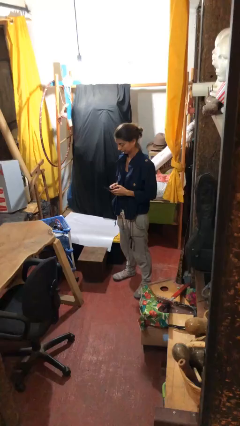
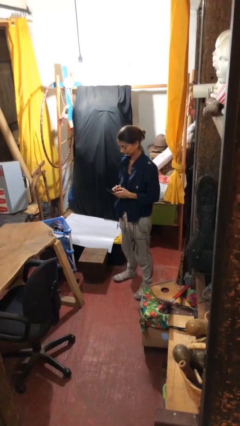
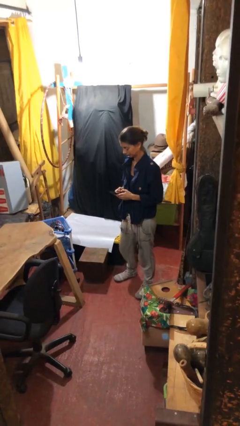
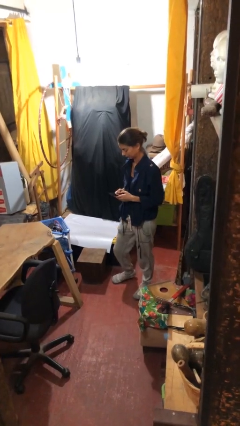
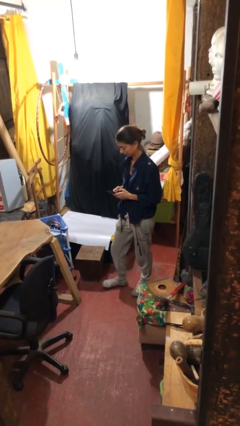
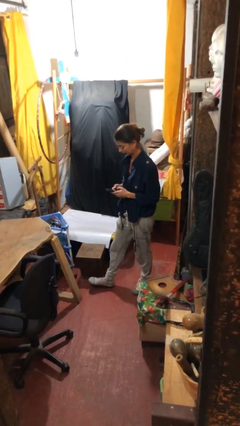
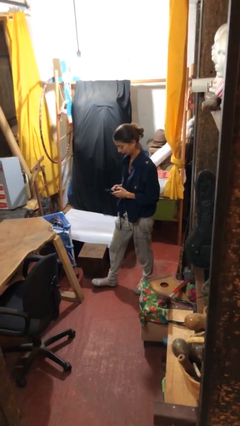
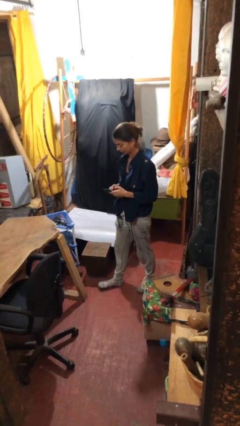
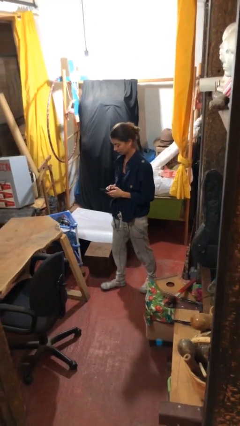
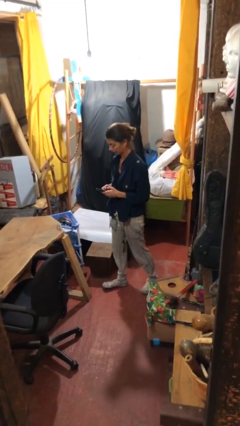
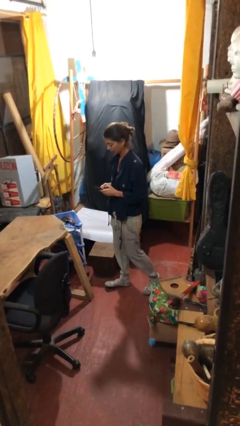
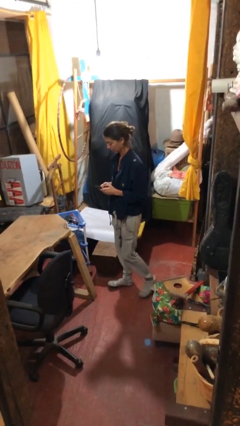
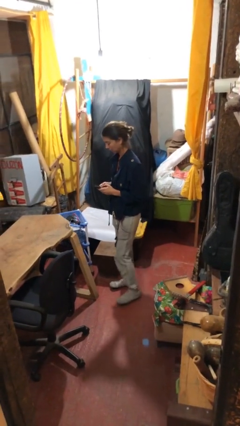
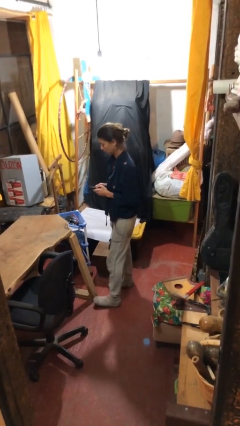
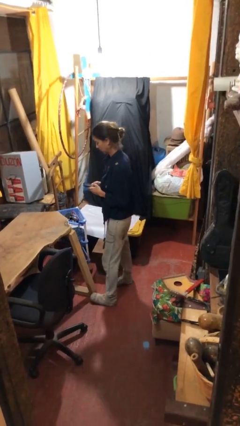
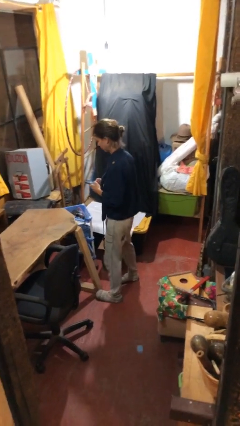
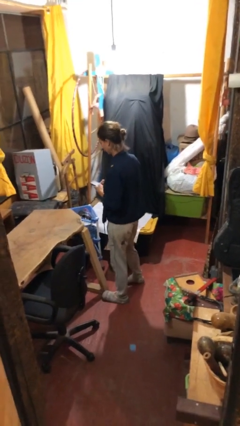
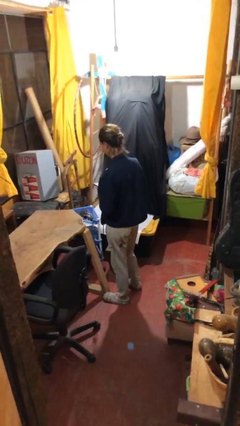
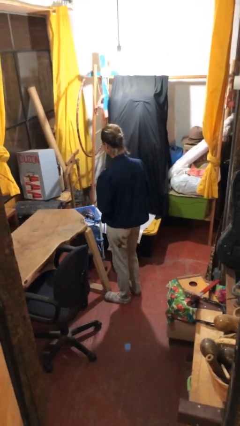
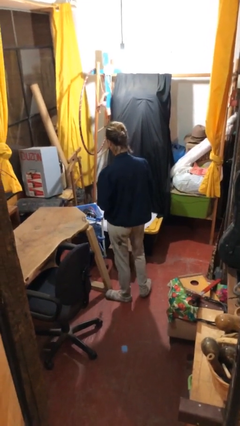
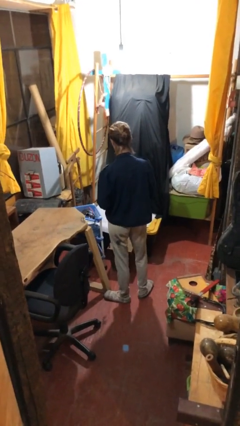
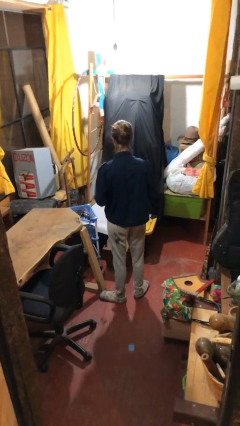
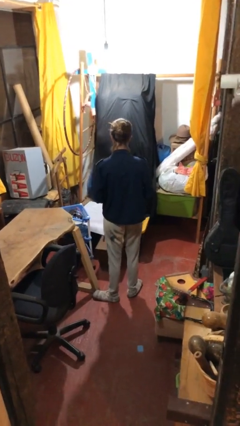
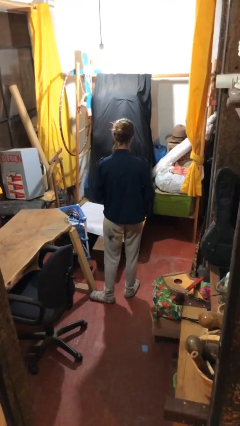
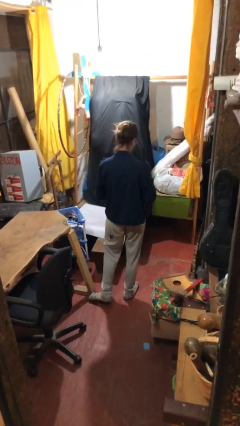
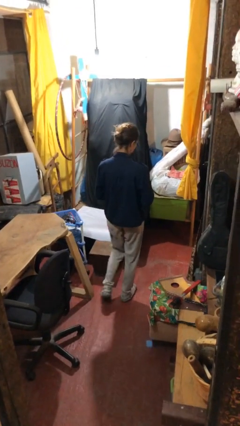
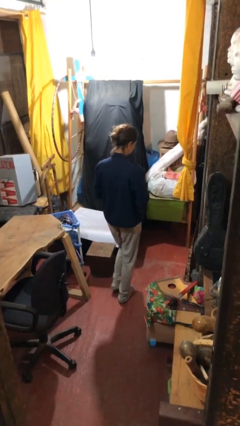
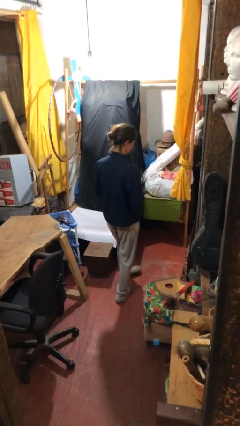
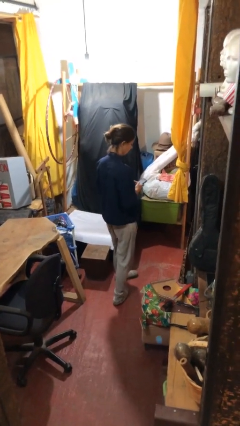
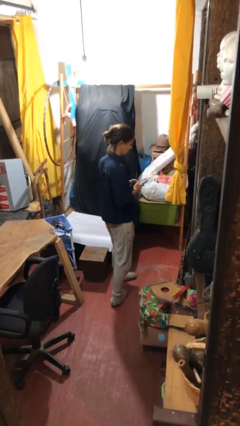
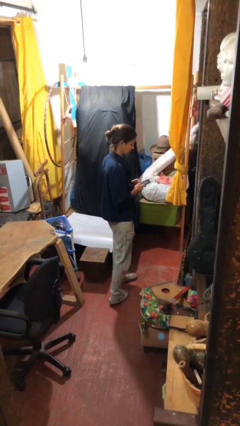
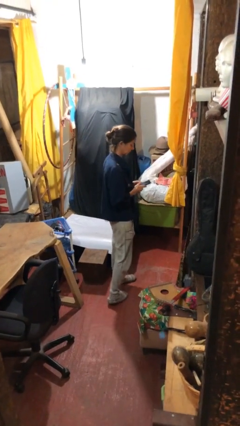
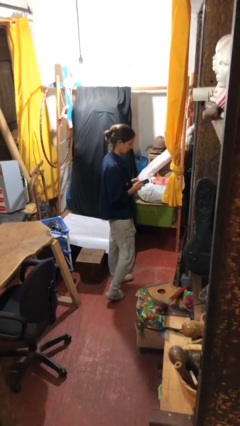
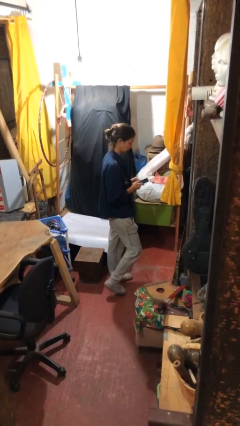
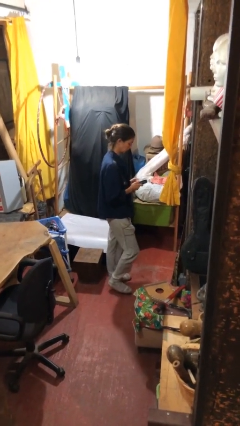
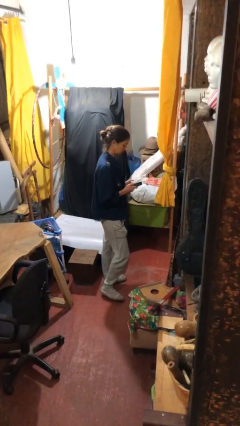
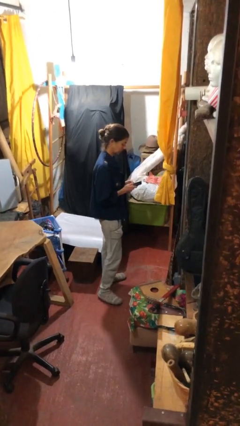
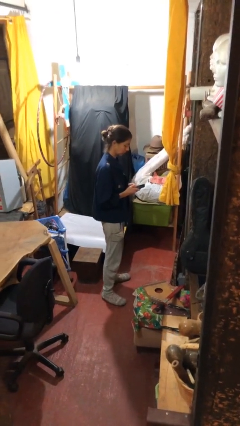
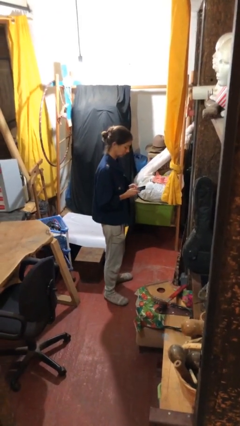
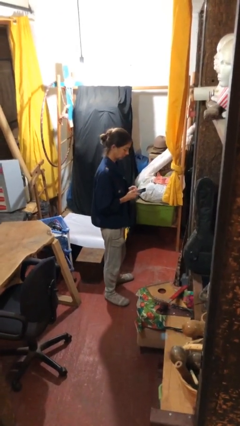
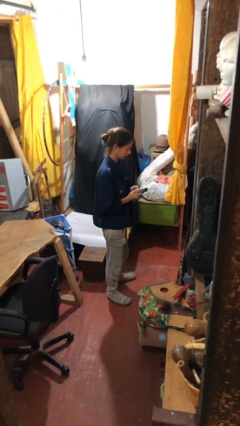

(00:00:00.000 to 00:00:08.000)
person texts on phone

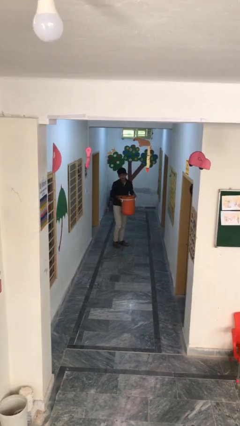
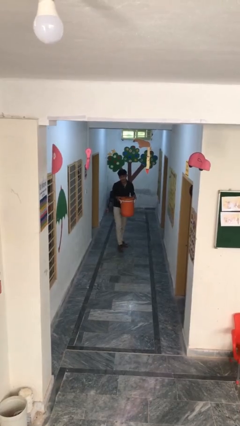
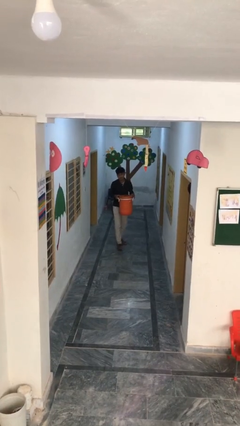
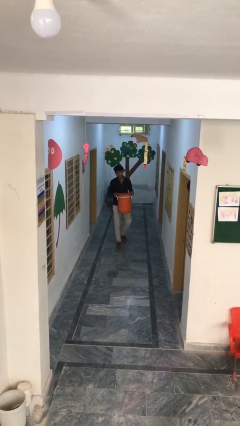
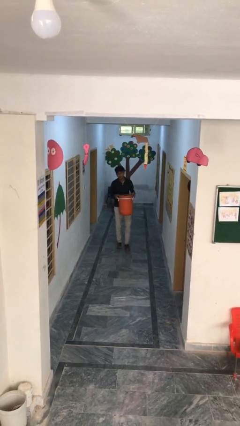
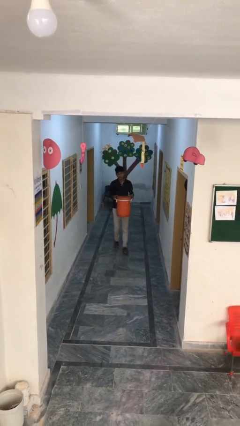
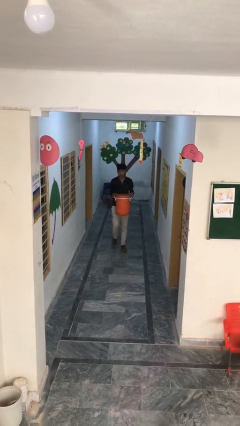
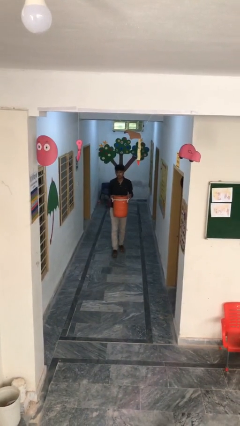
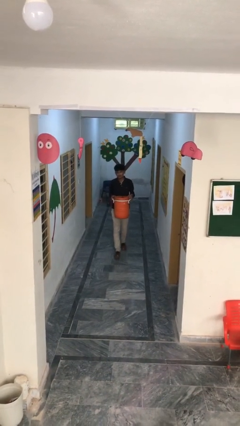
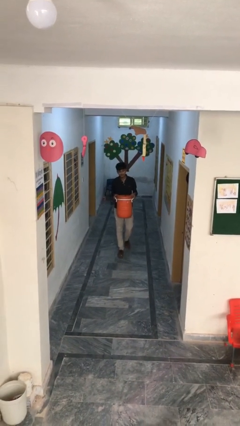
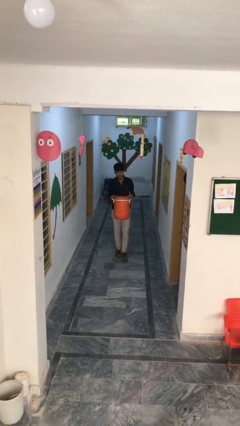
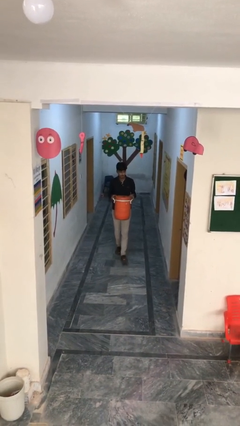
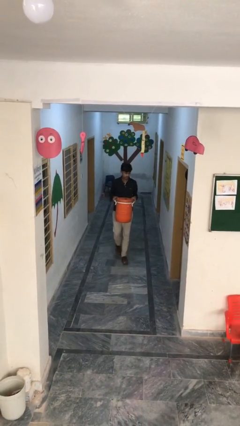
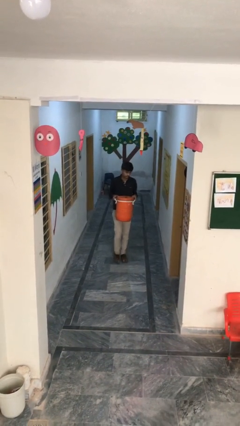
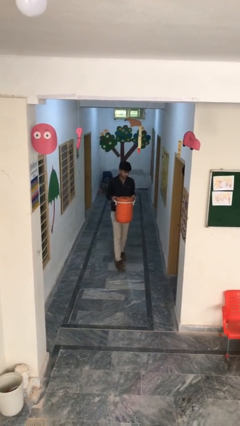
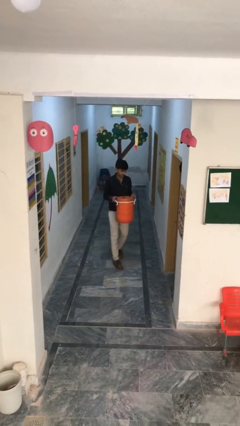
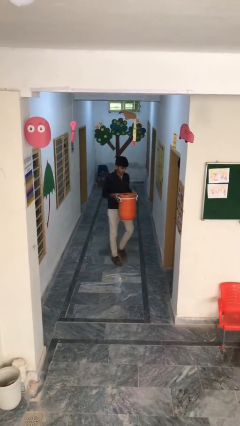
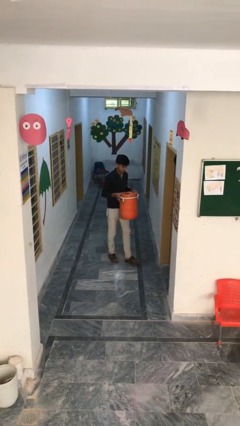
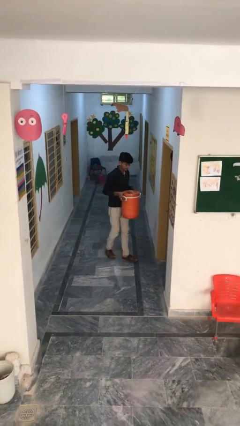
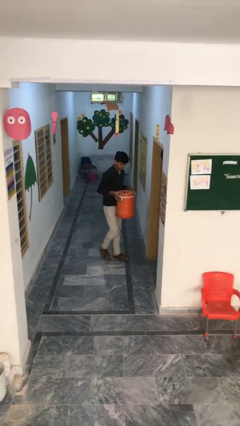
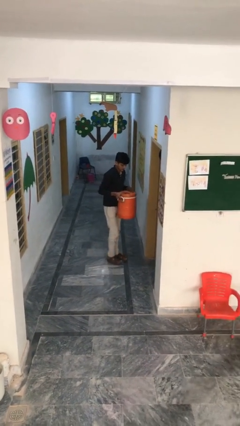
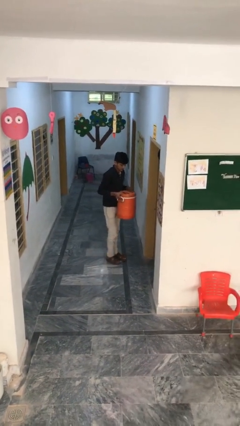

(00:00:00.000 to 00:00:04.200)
person carries heavy object

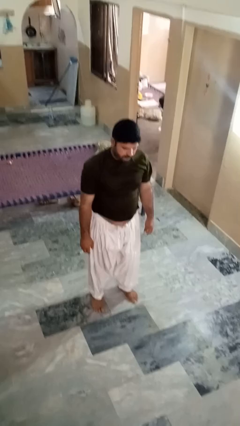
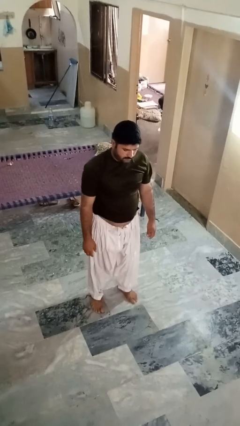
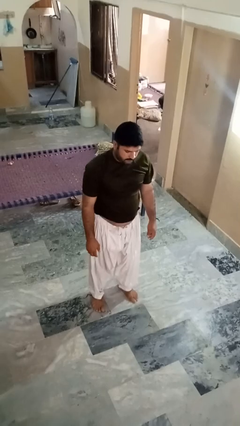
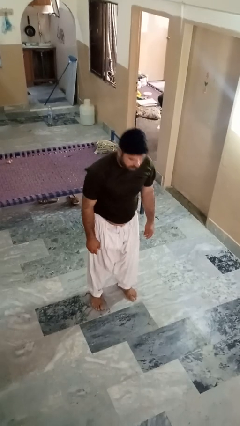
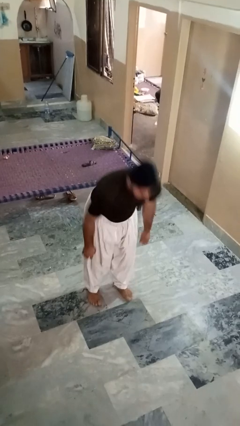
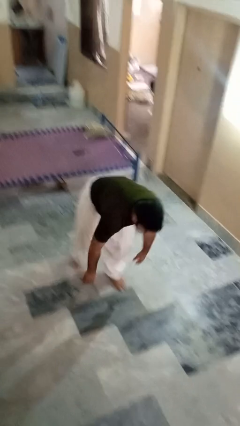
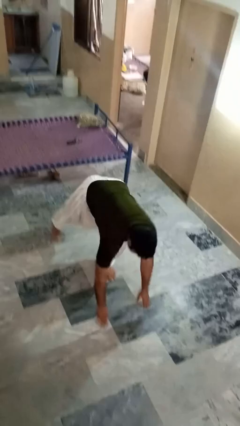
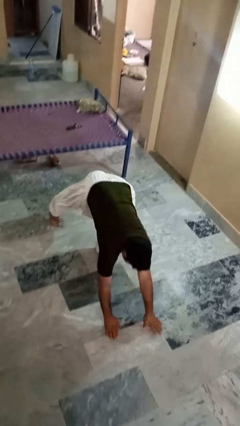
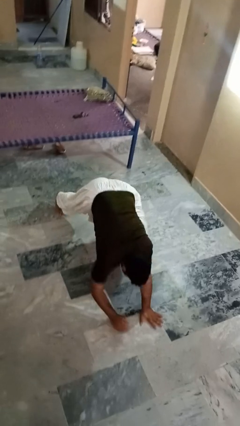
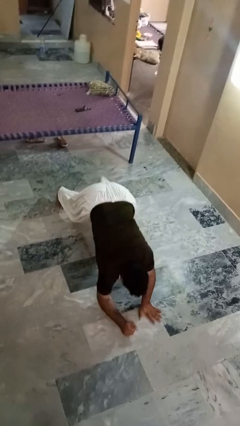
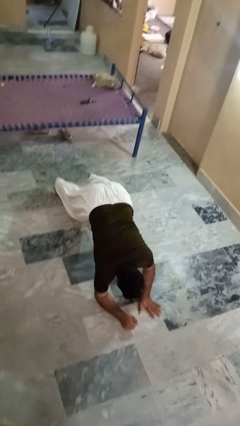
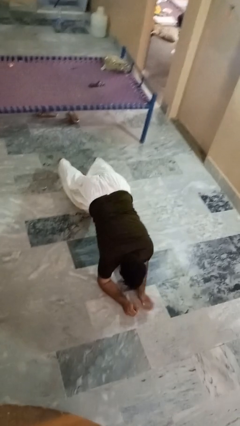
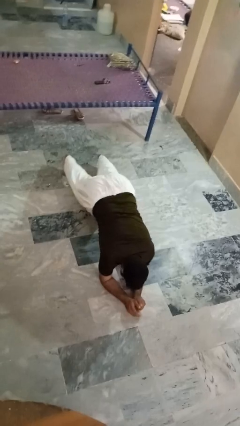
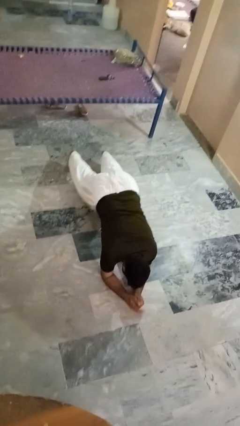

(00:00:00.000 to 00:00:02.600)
person exercises with plank

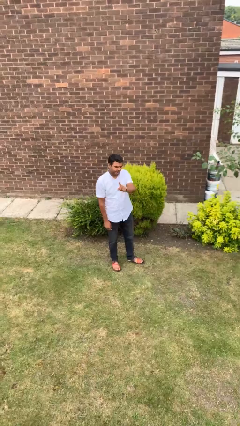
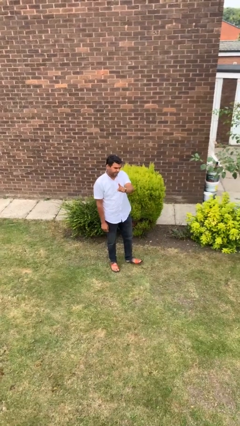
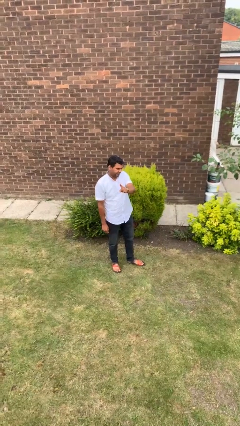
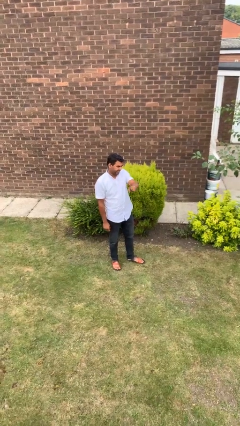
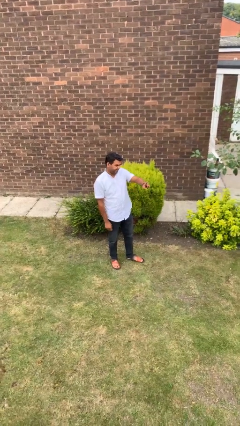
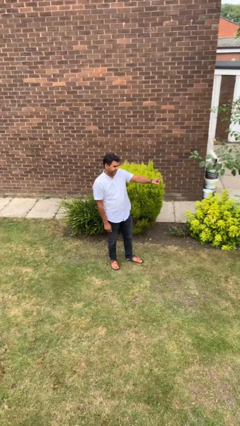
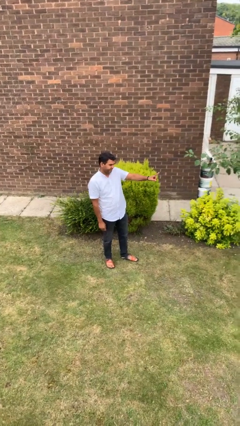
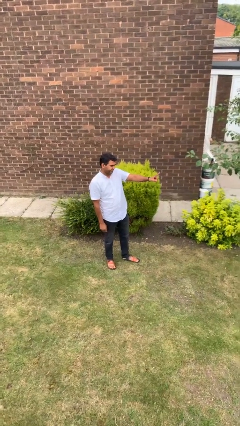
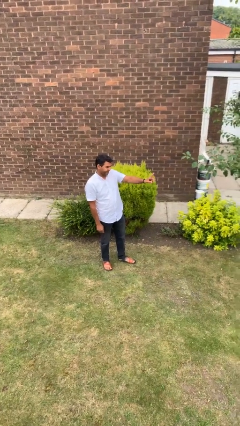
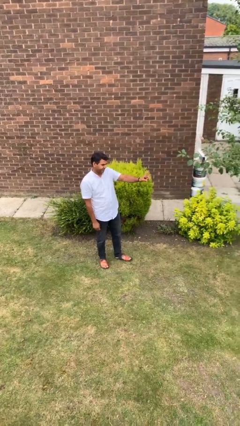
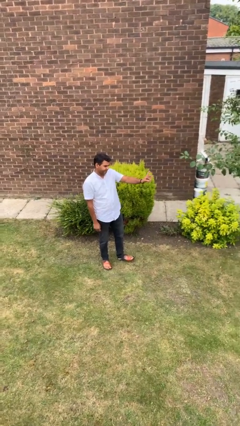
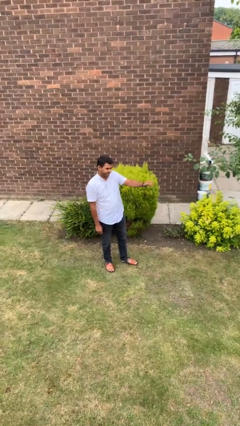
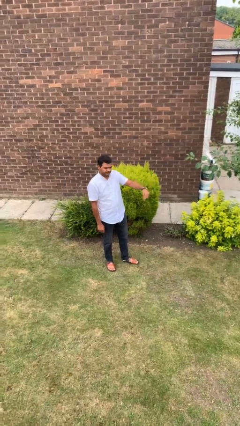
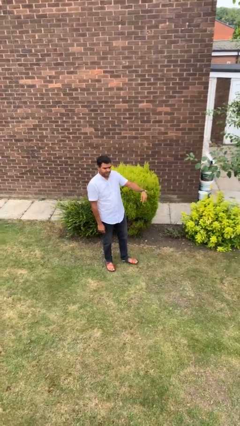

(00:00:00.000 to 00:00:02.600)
person gestures swipe left

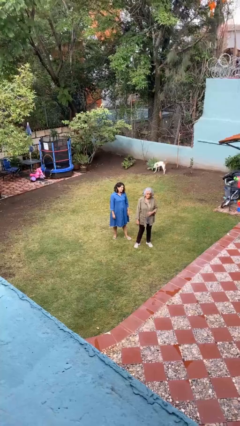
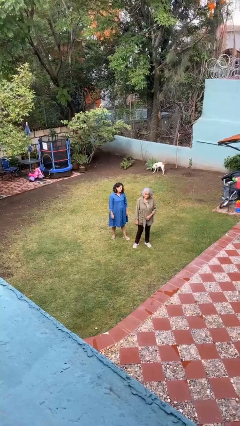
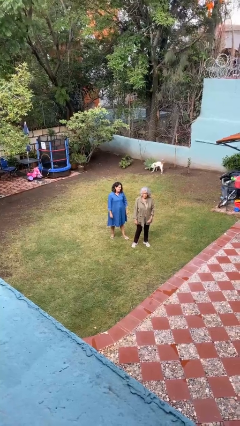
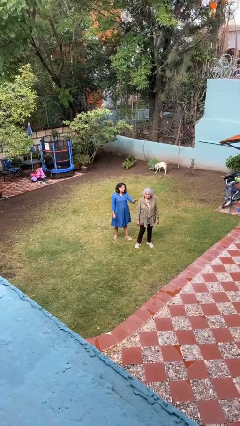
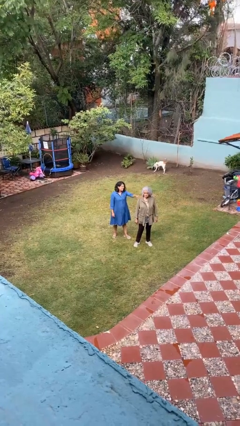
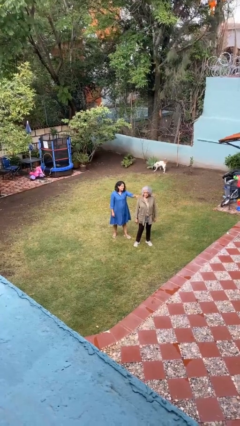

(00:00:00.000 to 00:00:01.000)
person grabs person by shoulder
